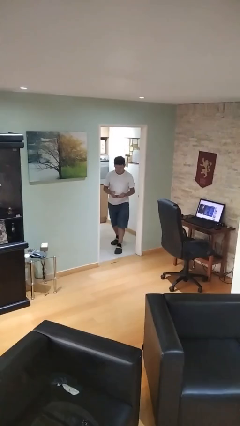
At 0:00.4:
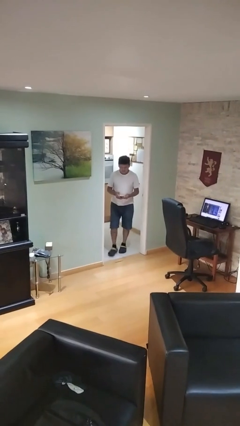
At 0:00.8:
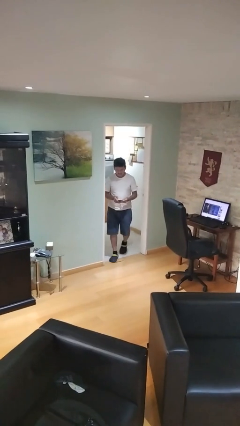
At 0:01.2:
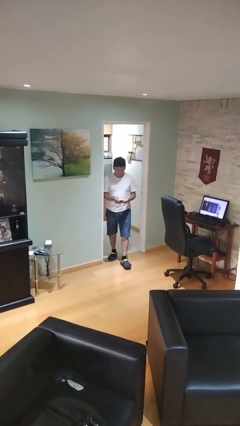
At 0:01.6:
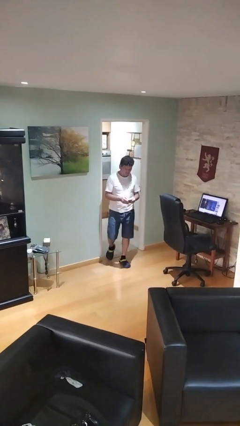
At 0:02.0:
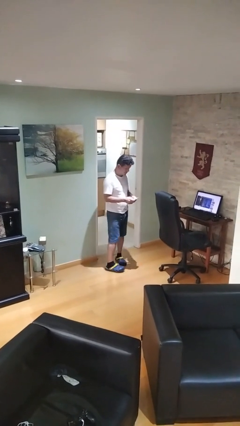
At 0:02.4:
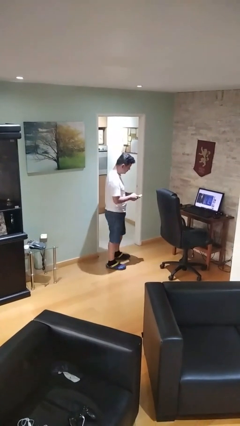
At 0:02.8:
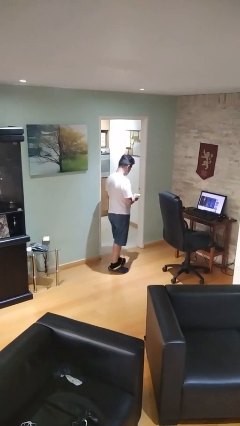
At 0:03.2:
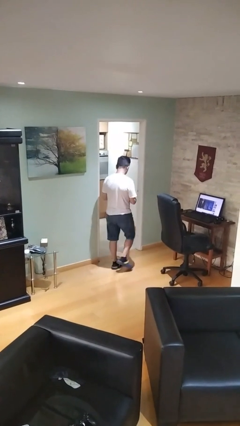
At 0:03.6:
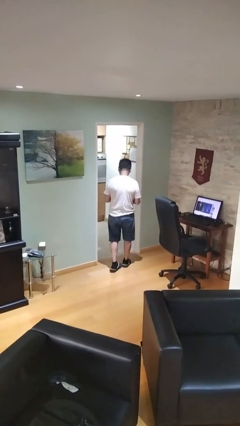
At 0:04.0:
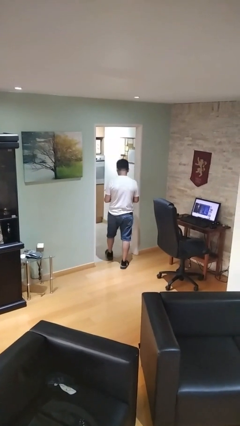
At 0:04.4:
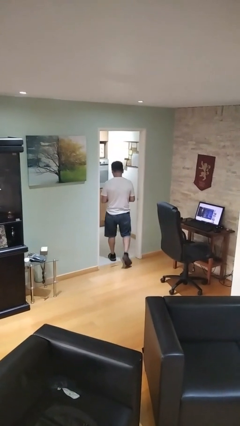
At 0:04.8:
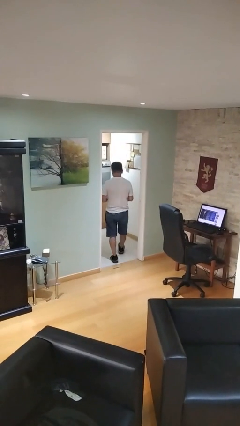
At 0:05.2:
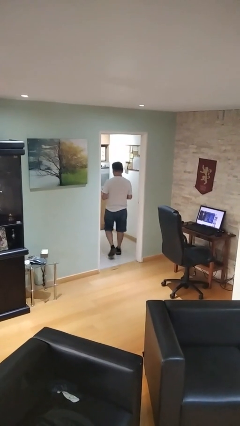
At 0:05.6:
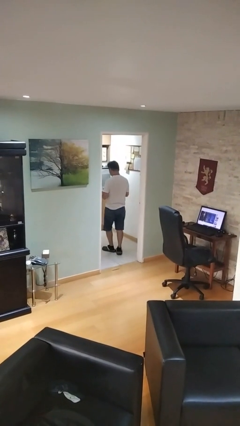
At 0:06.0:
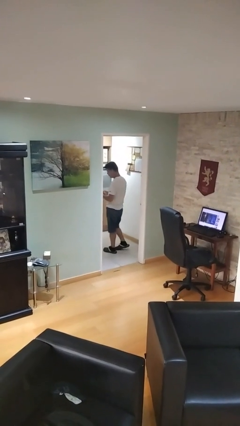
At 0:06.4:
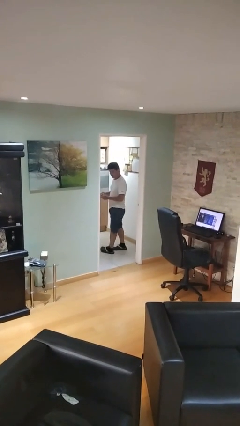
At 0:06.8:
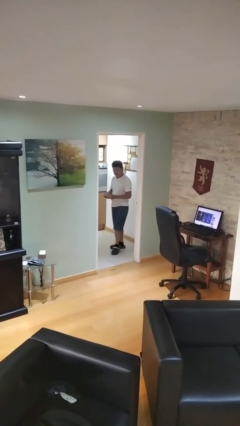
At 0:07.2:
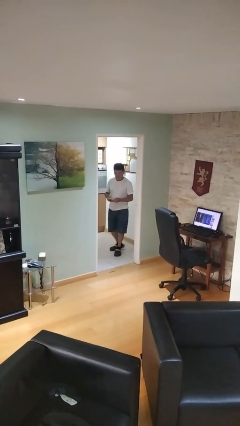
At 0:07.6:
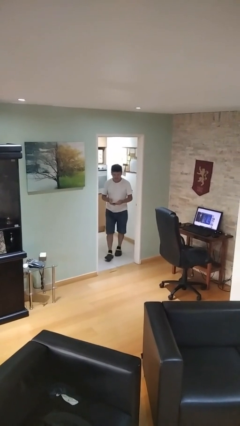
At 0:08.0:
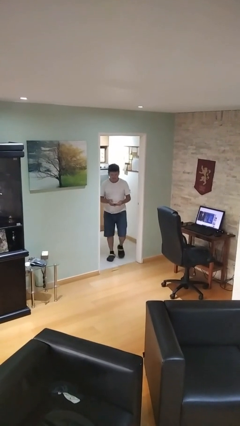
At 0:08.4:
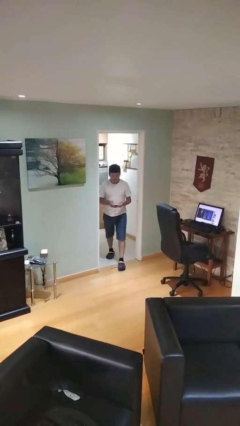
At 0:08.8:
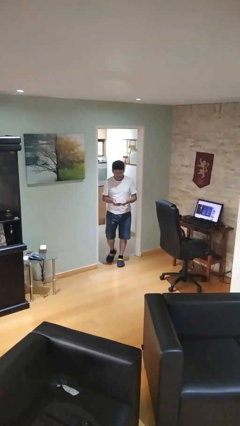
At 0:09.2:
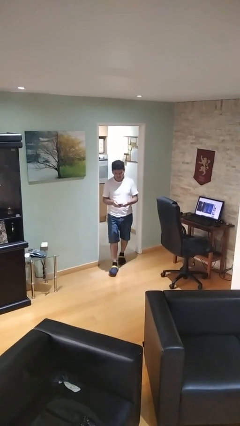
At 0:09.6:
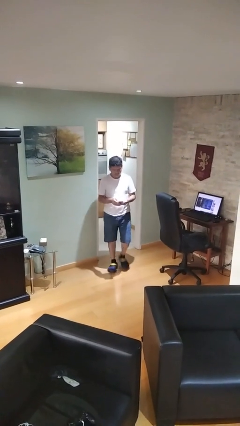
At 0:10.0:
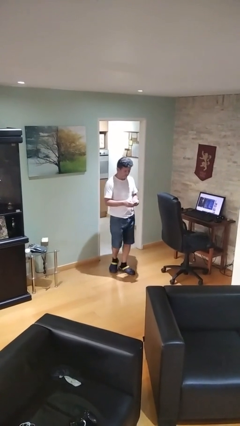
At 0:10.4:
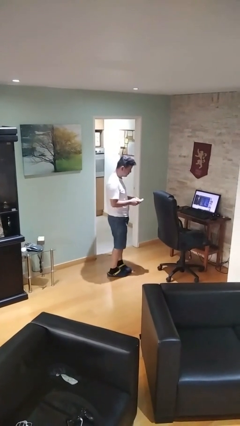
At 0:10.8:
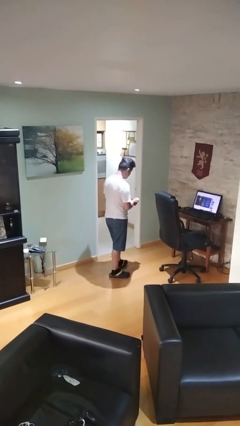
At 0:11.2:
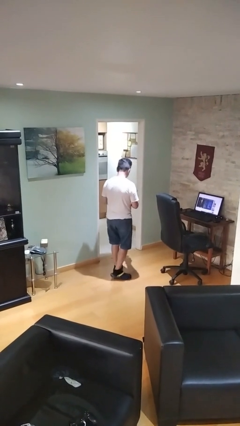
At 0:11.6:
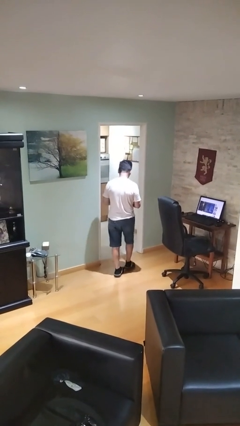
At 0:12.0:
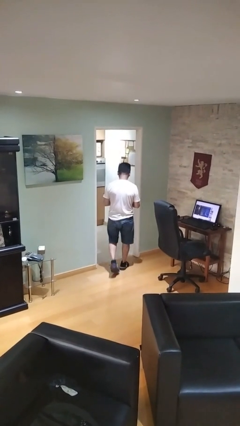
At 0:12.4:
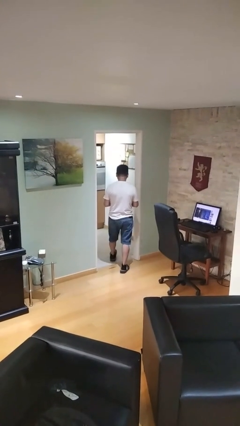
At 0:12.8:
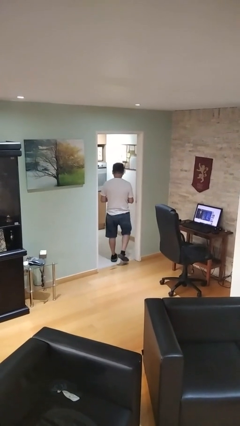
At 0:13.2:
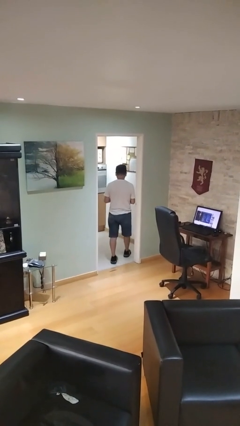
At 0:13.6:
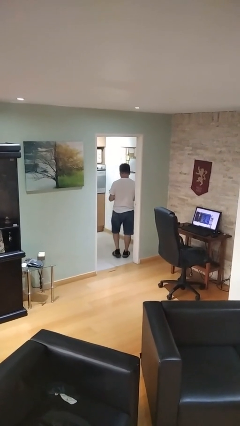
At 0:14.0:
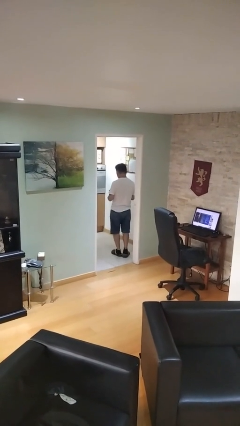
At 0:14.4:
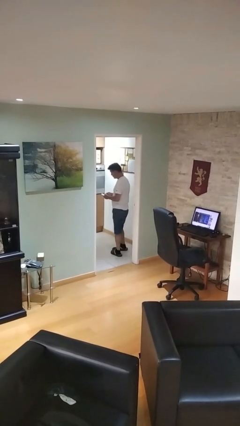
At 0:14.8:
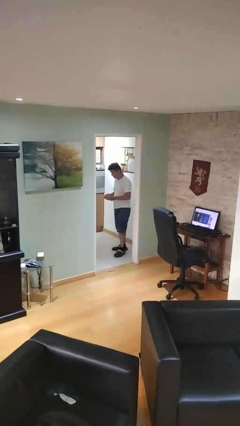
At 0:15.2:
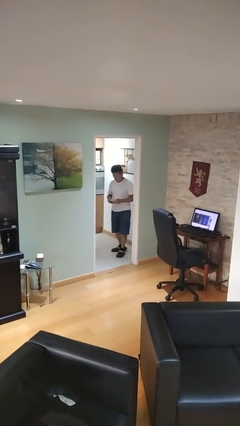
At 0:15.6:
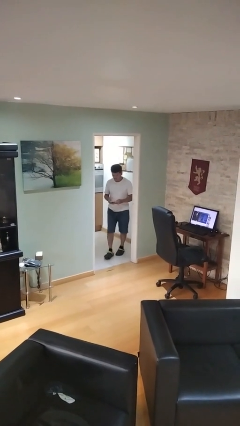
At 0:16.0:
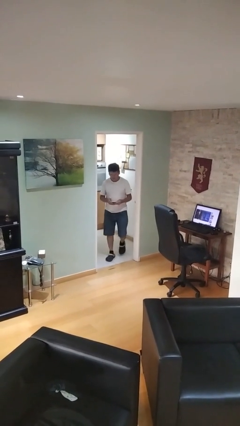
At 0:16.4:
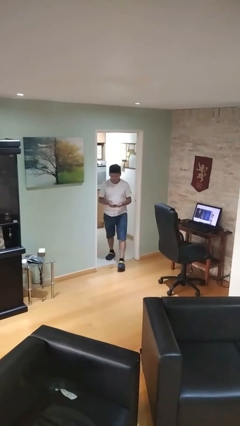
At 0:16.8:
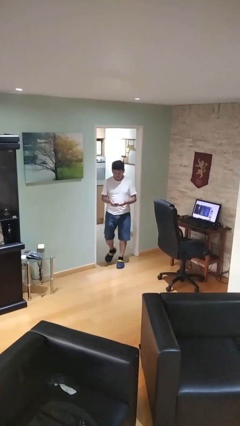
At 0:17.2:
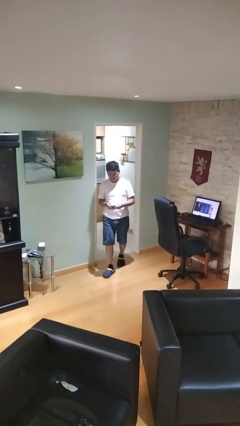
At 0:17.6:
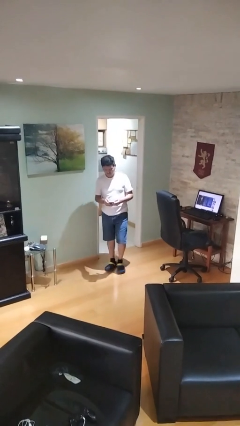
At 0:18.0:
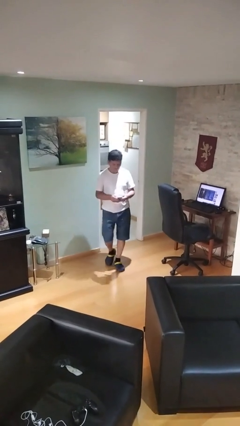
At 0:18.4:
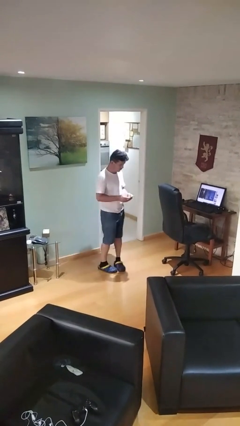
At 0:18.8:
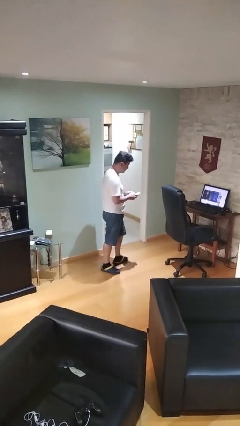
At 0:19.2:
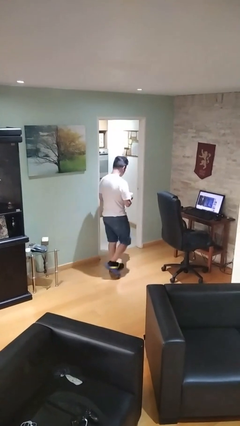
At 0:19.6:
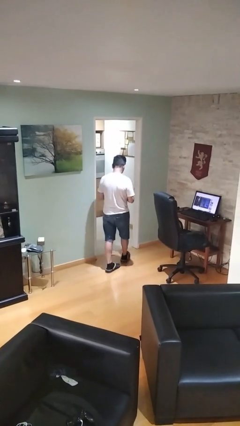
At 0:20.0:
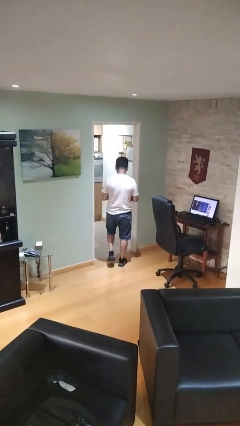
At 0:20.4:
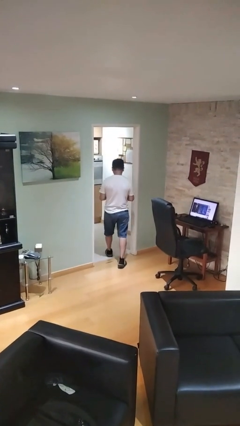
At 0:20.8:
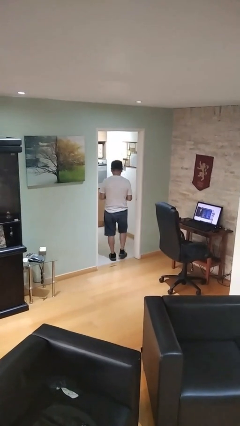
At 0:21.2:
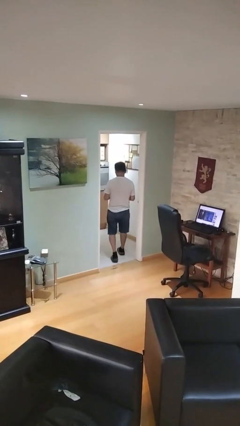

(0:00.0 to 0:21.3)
person texts on phone

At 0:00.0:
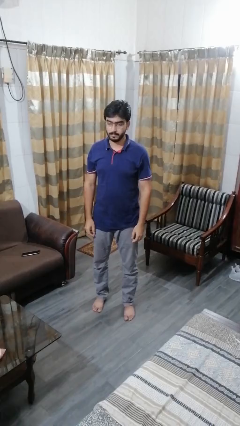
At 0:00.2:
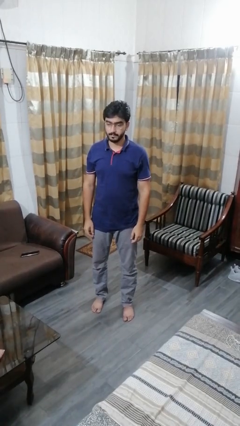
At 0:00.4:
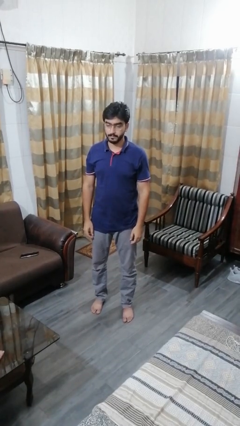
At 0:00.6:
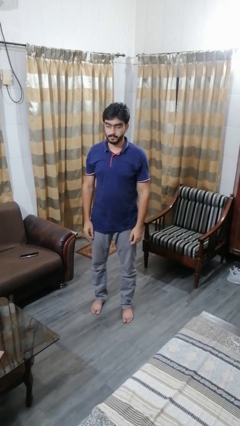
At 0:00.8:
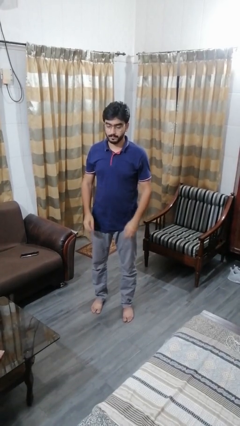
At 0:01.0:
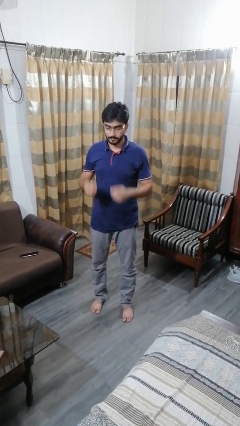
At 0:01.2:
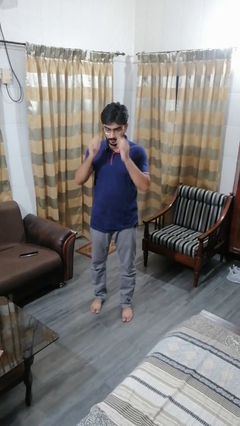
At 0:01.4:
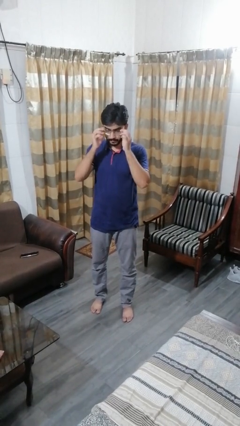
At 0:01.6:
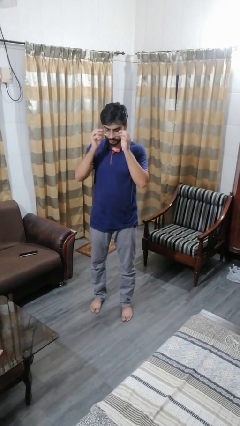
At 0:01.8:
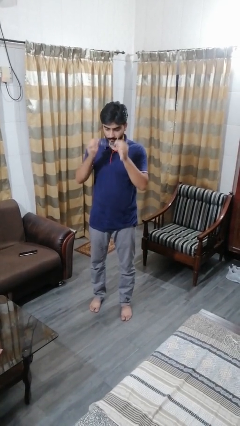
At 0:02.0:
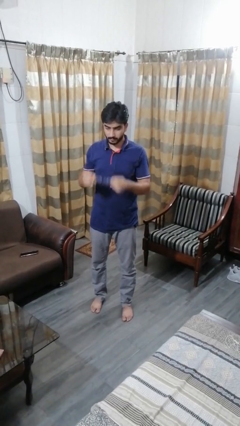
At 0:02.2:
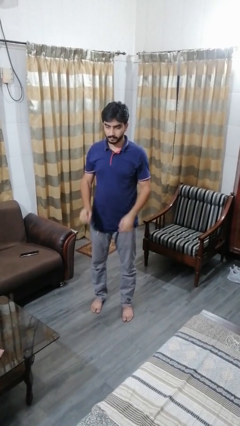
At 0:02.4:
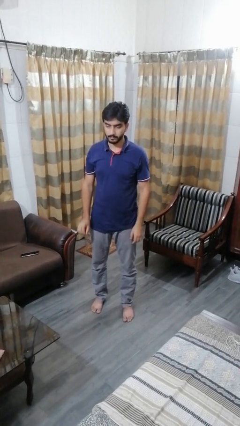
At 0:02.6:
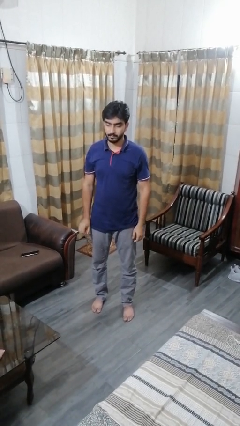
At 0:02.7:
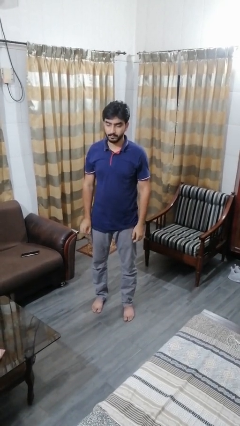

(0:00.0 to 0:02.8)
person takes off glasses

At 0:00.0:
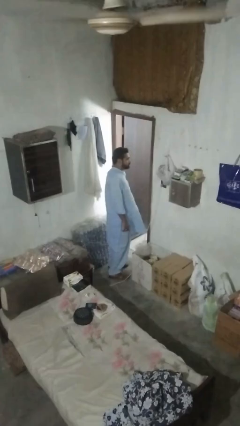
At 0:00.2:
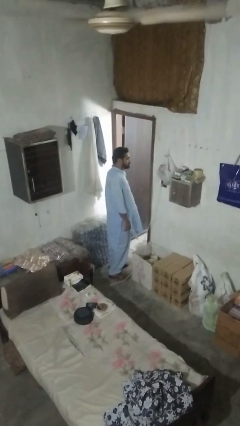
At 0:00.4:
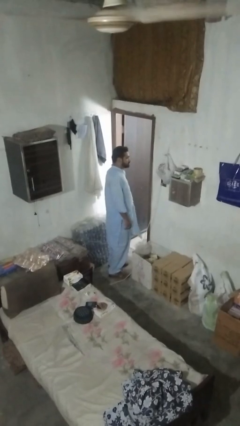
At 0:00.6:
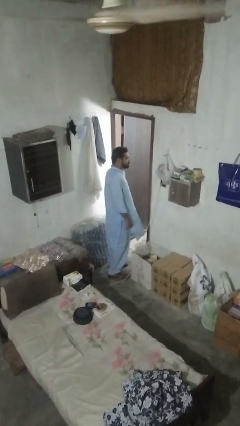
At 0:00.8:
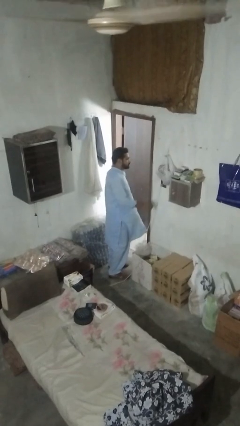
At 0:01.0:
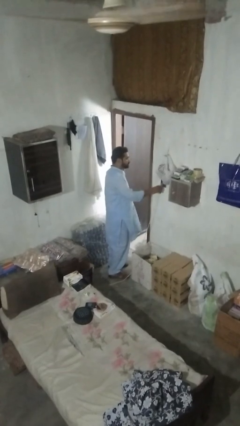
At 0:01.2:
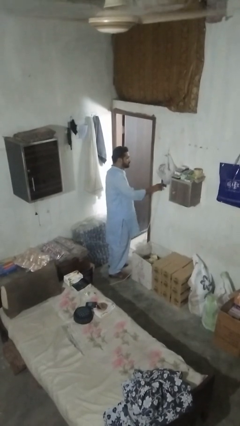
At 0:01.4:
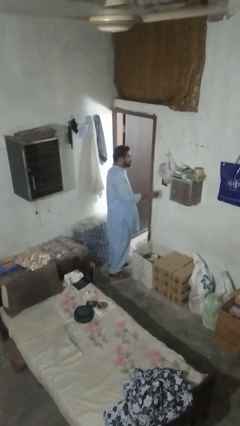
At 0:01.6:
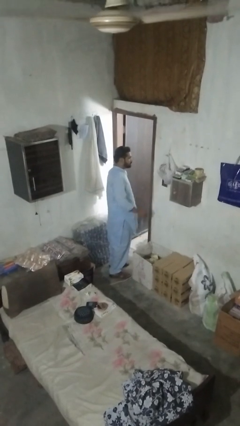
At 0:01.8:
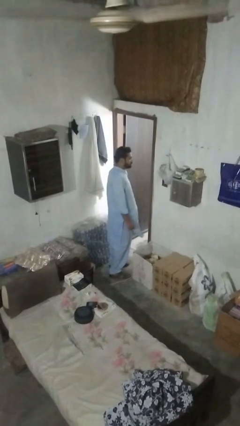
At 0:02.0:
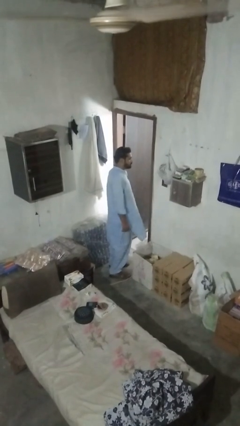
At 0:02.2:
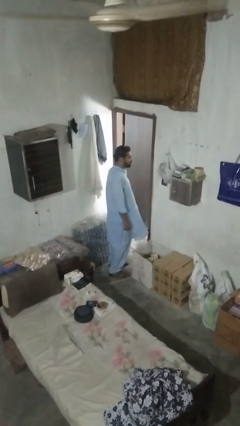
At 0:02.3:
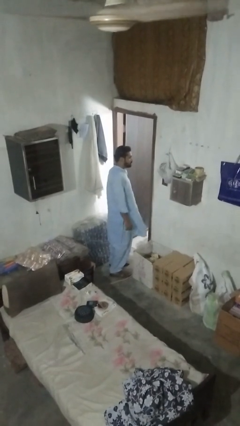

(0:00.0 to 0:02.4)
person unplugs from electrical socket

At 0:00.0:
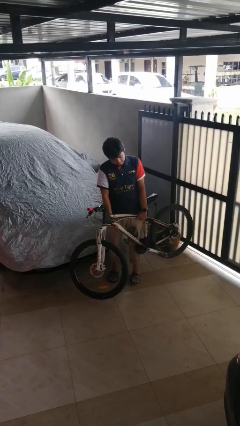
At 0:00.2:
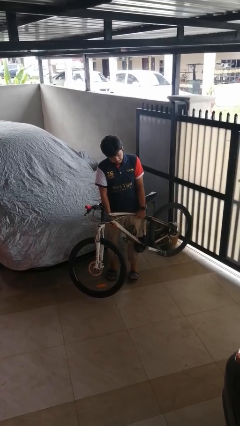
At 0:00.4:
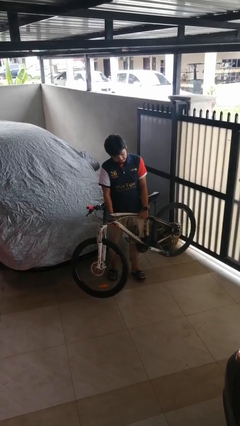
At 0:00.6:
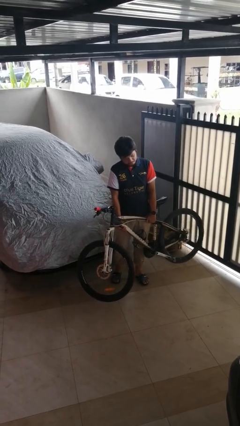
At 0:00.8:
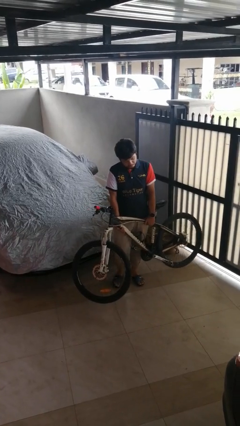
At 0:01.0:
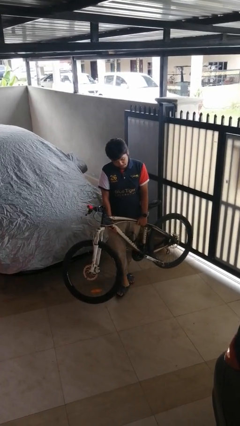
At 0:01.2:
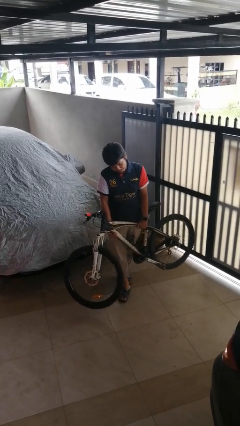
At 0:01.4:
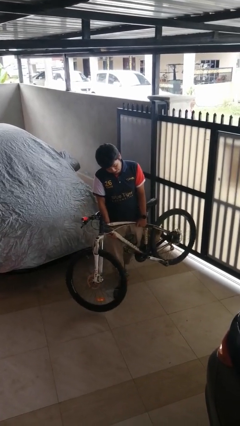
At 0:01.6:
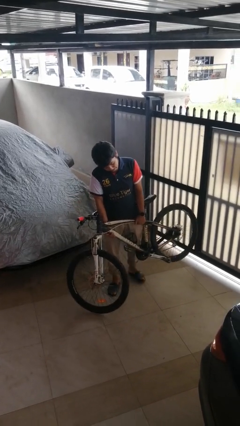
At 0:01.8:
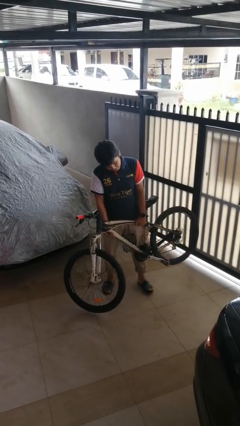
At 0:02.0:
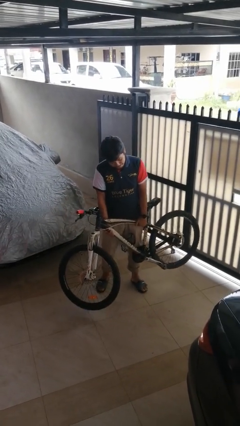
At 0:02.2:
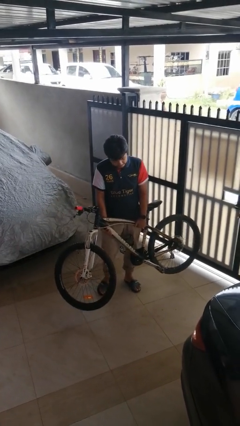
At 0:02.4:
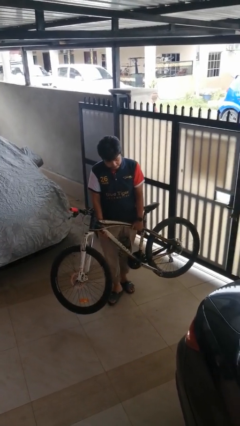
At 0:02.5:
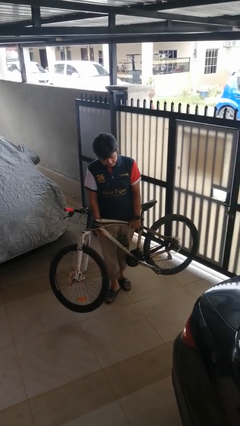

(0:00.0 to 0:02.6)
person carries bicycle
